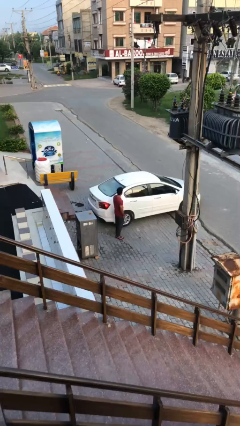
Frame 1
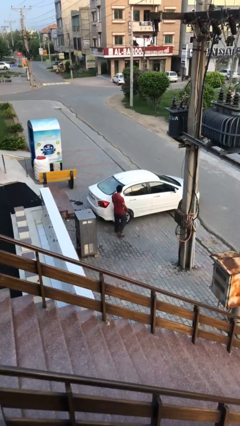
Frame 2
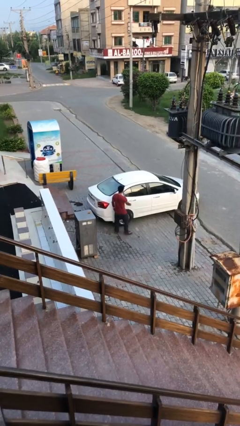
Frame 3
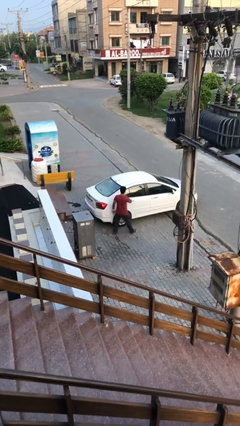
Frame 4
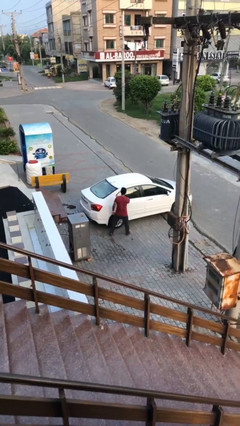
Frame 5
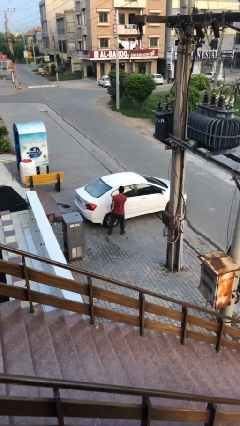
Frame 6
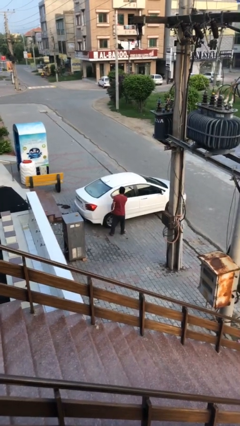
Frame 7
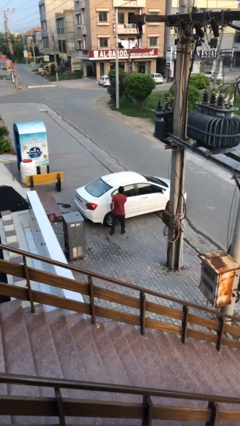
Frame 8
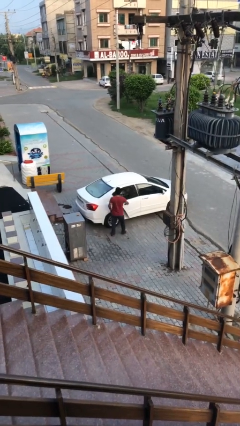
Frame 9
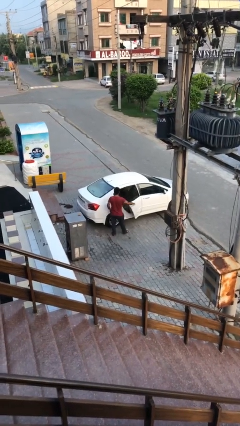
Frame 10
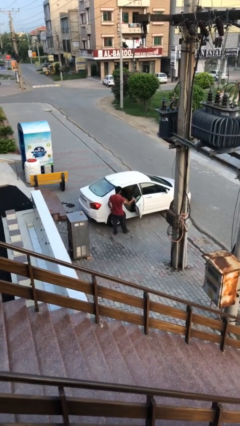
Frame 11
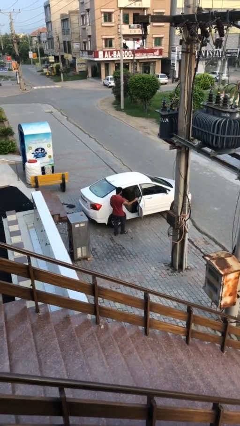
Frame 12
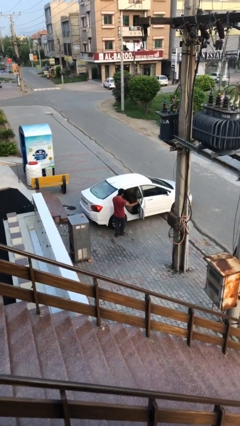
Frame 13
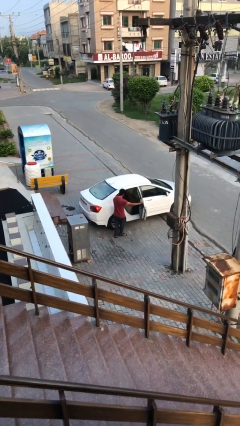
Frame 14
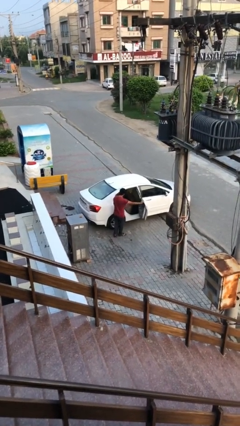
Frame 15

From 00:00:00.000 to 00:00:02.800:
person opens car door

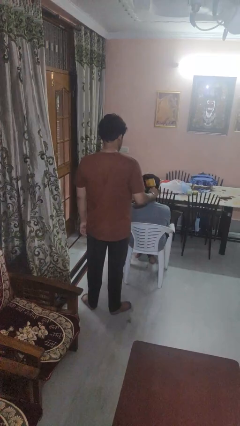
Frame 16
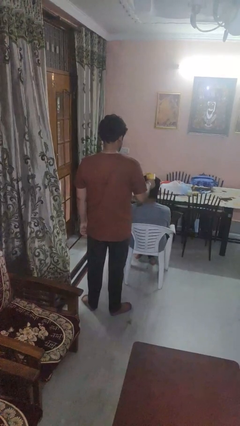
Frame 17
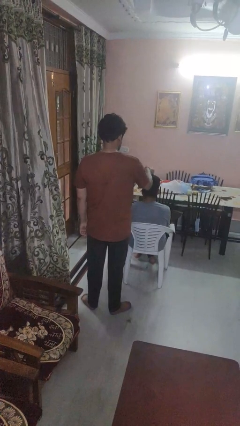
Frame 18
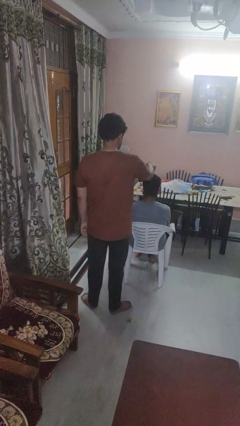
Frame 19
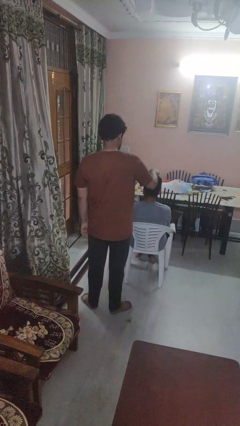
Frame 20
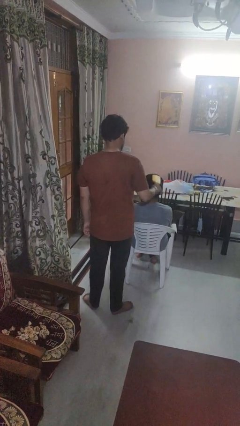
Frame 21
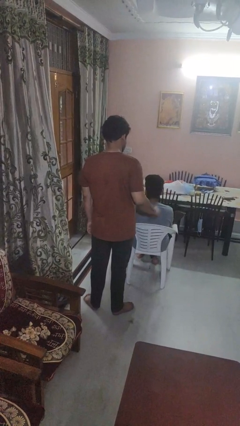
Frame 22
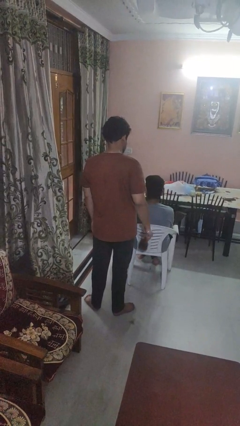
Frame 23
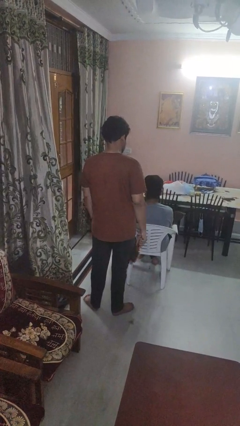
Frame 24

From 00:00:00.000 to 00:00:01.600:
person brushes hair of person

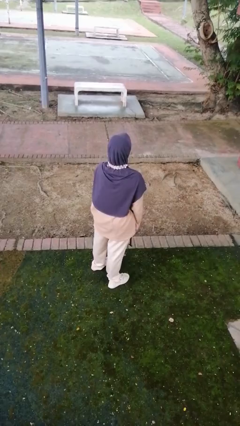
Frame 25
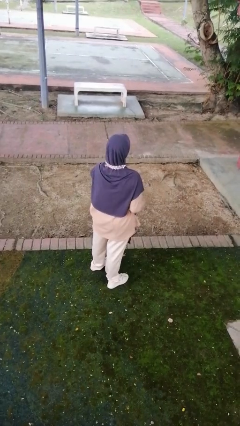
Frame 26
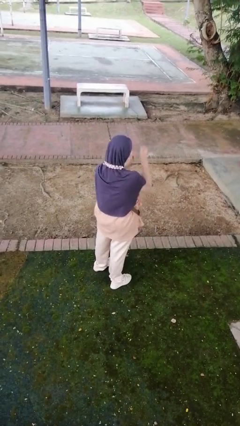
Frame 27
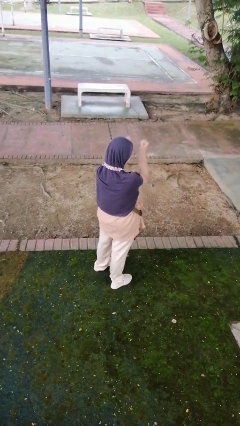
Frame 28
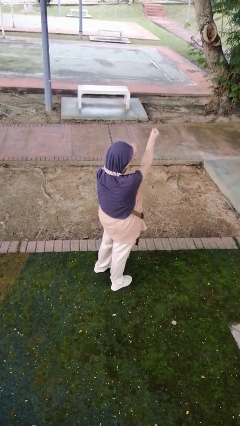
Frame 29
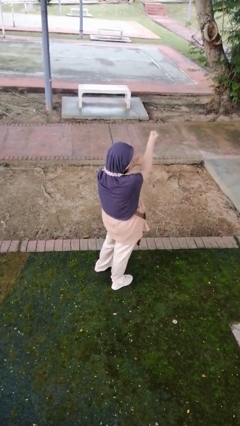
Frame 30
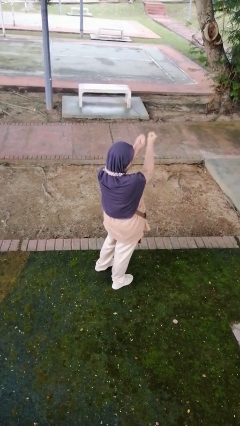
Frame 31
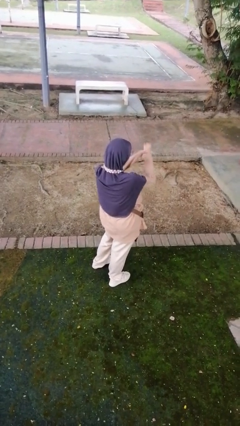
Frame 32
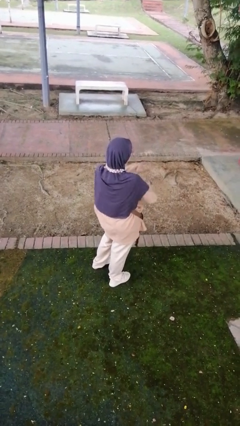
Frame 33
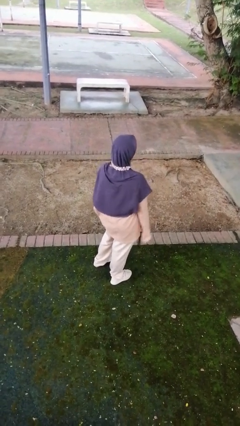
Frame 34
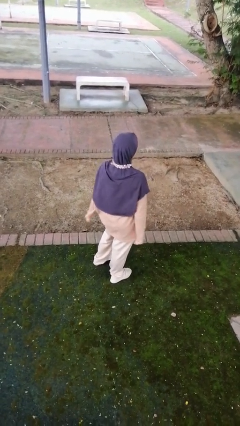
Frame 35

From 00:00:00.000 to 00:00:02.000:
person punches

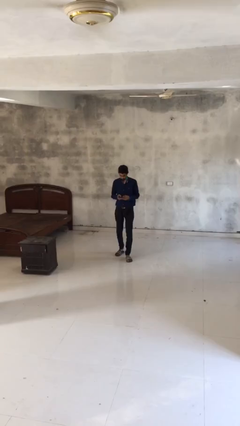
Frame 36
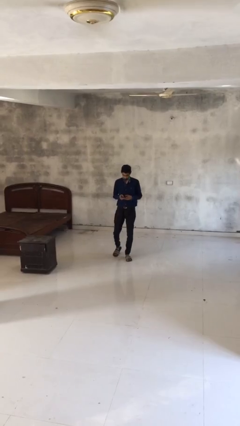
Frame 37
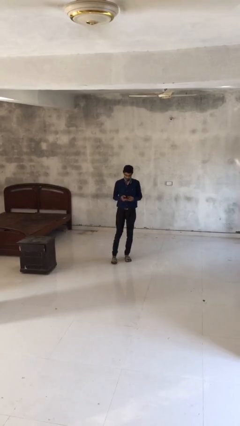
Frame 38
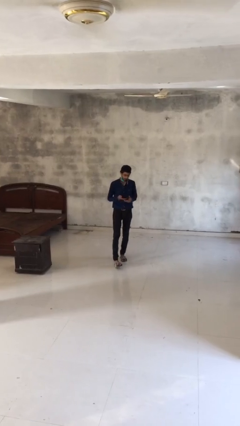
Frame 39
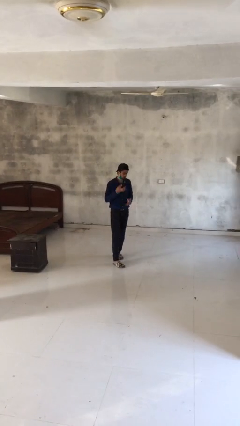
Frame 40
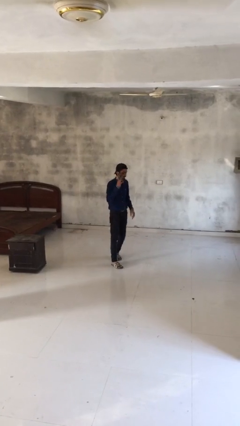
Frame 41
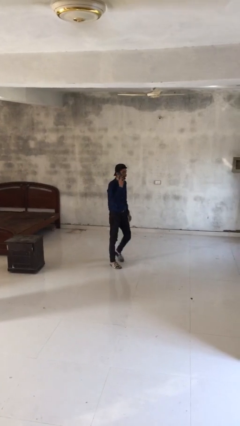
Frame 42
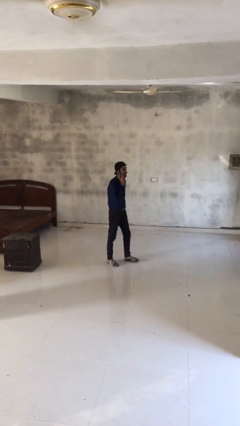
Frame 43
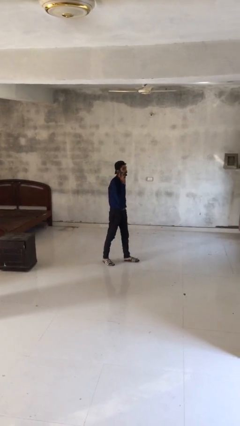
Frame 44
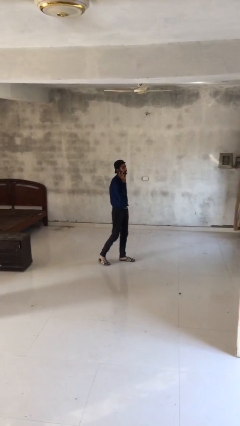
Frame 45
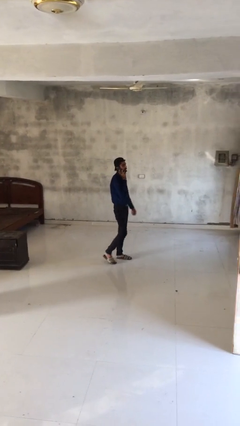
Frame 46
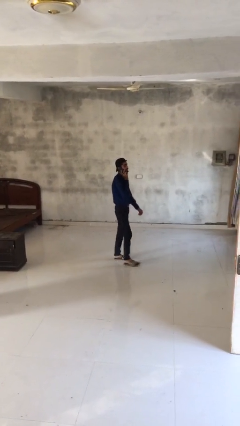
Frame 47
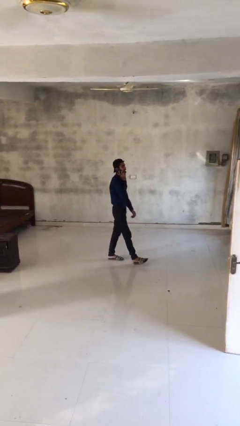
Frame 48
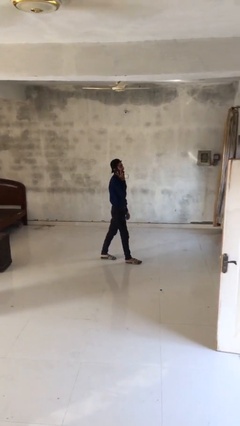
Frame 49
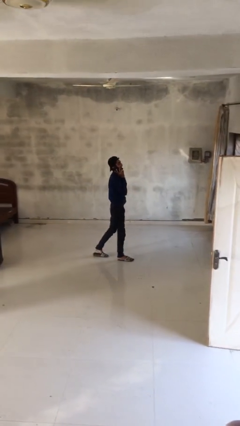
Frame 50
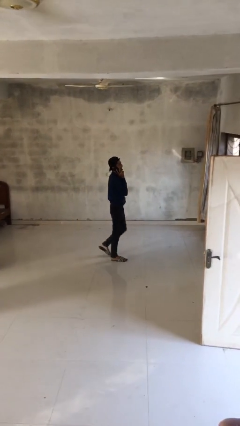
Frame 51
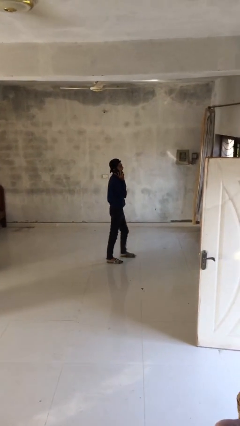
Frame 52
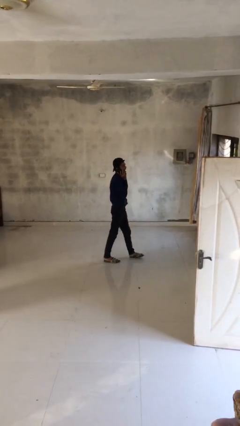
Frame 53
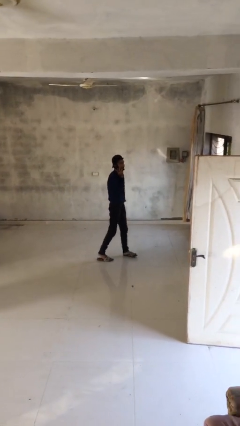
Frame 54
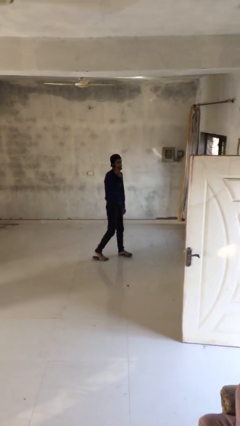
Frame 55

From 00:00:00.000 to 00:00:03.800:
person talks on phone

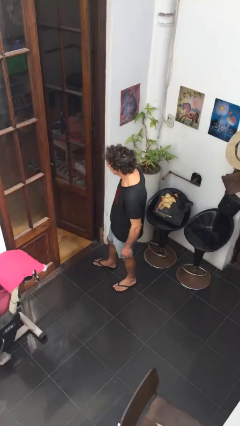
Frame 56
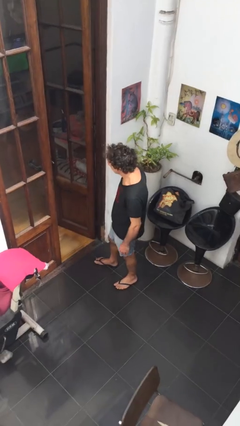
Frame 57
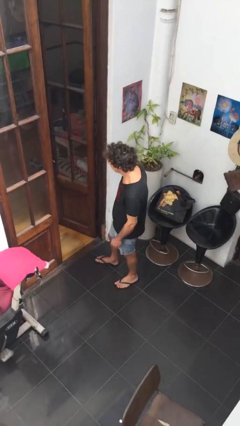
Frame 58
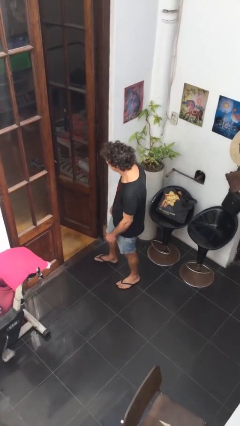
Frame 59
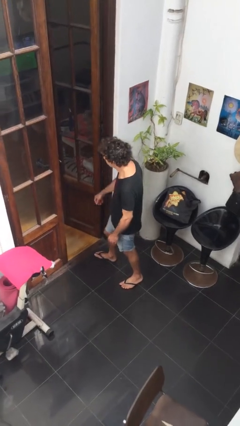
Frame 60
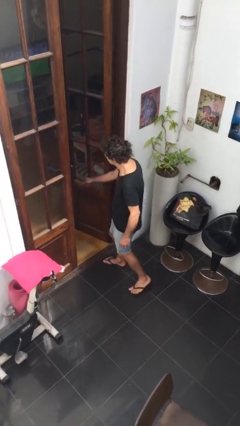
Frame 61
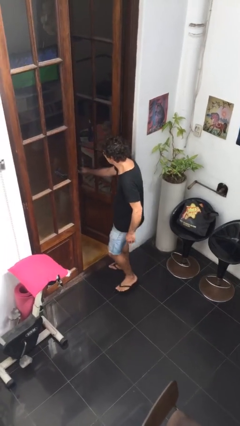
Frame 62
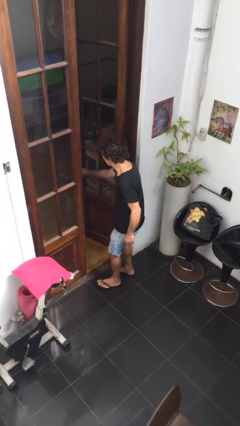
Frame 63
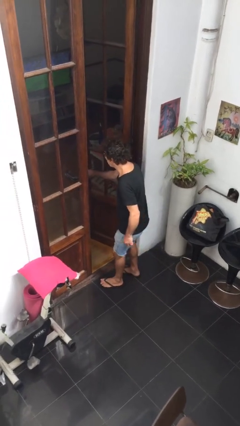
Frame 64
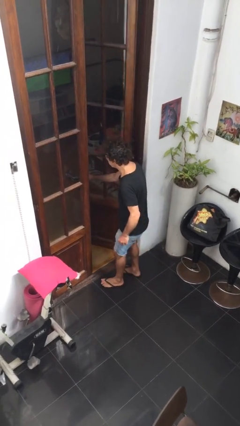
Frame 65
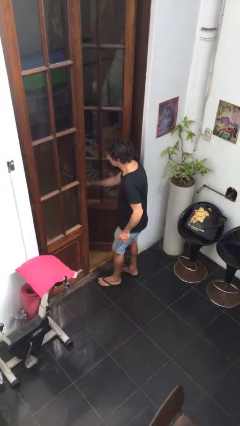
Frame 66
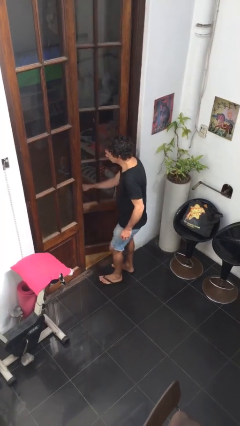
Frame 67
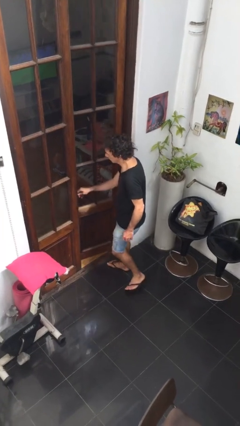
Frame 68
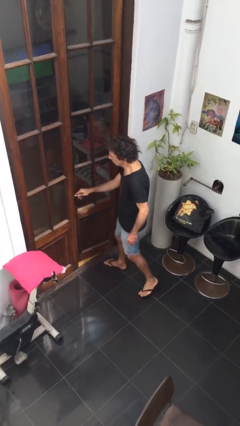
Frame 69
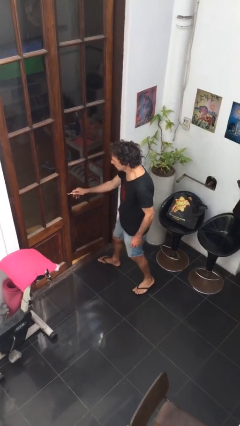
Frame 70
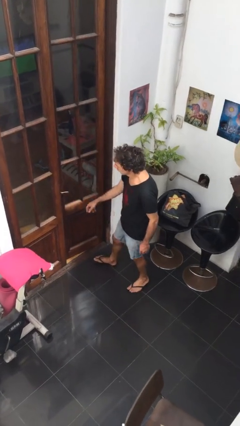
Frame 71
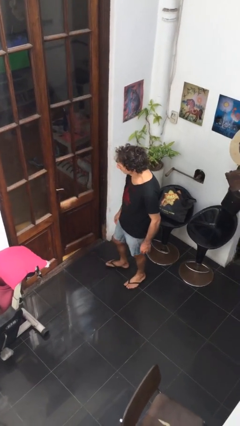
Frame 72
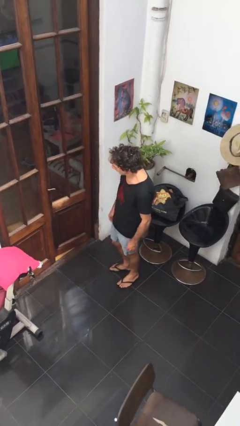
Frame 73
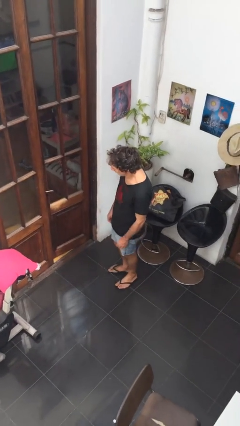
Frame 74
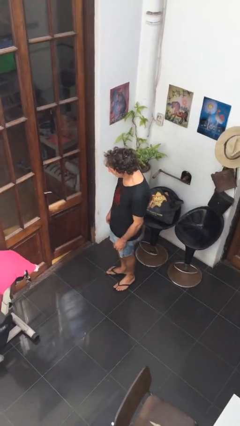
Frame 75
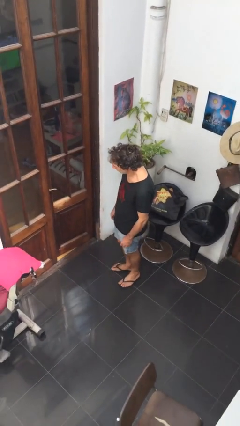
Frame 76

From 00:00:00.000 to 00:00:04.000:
person closes facility door

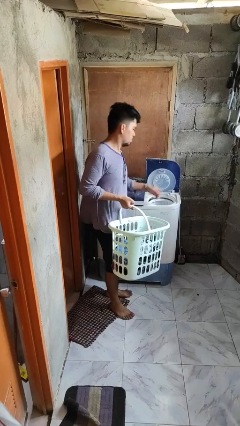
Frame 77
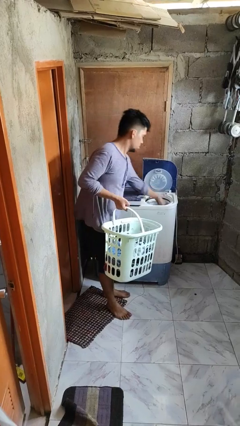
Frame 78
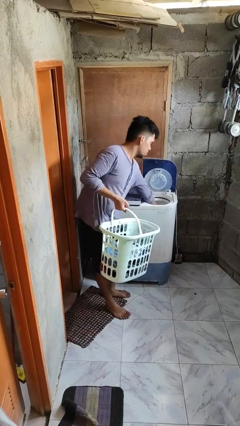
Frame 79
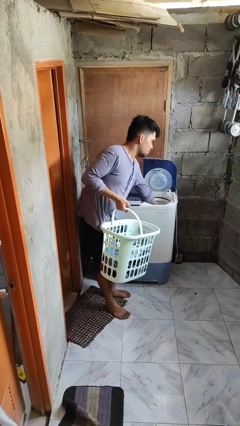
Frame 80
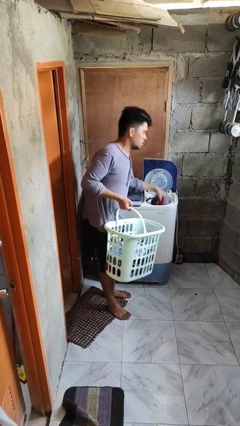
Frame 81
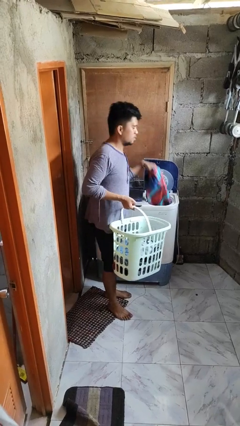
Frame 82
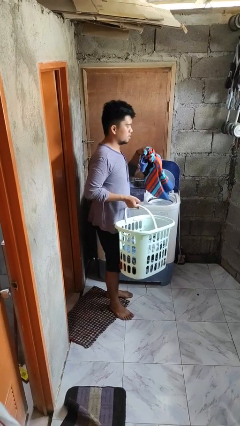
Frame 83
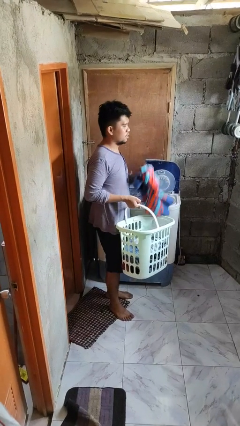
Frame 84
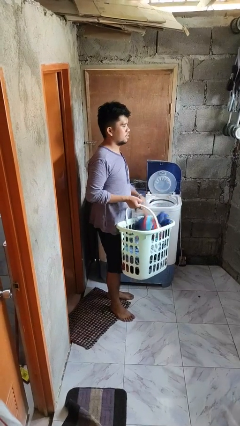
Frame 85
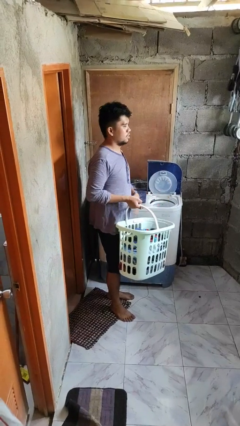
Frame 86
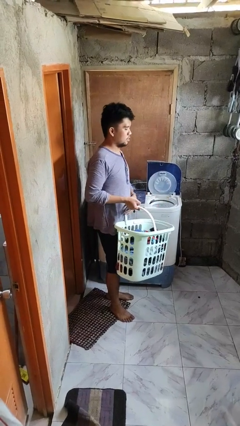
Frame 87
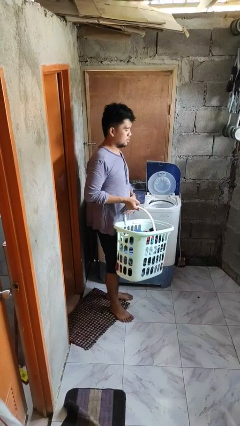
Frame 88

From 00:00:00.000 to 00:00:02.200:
person unloads dryer

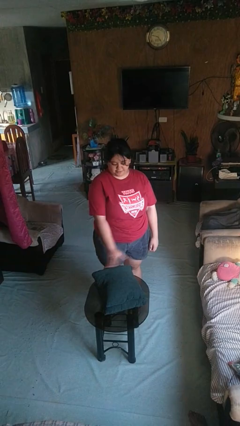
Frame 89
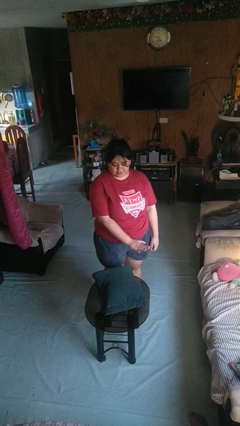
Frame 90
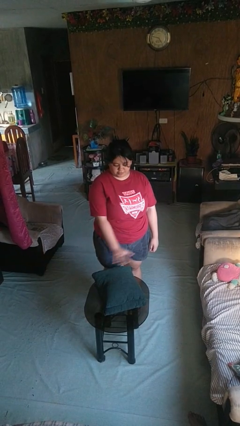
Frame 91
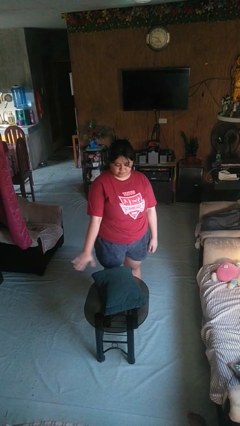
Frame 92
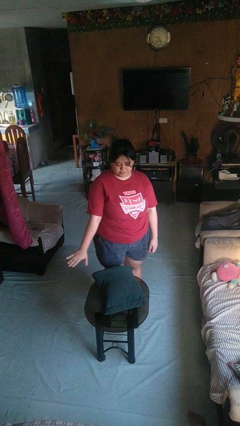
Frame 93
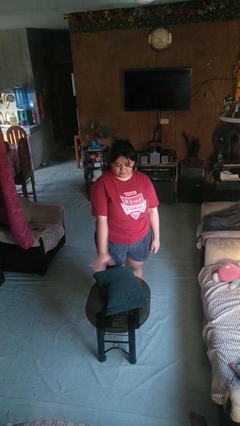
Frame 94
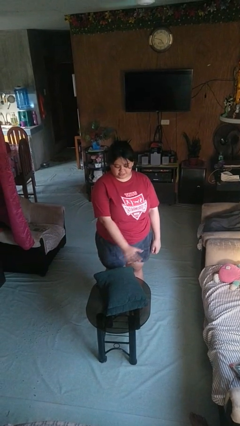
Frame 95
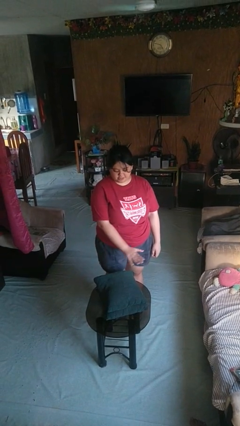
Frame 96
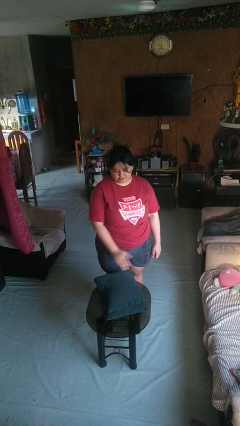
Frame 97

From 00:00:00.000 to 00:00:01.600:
person waves hand over object
